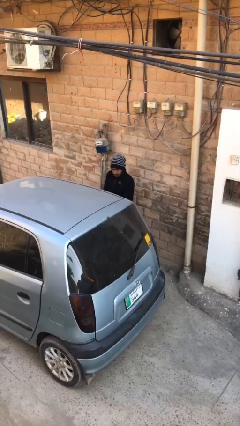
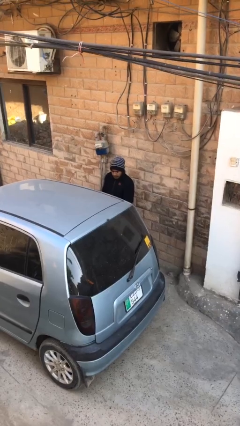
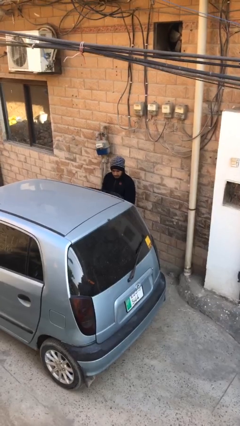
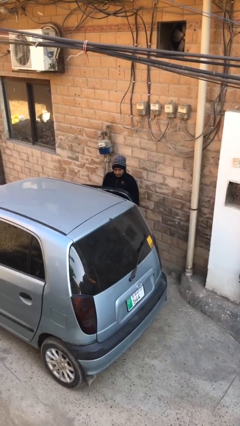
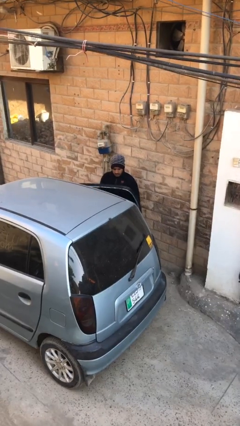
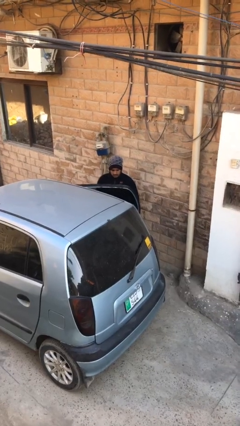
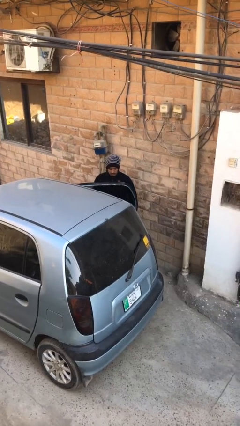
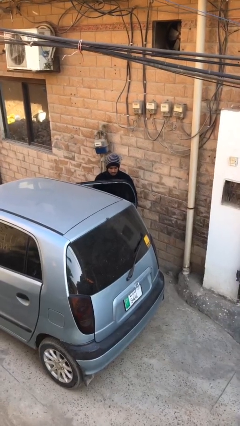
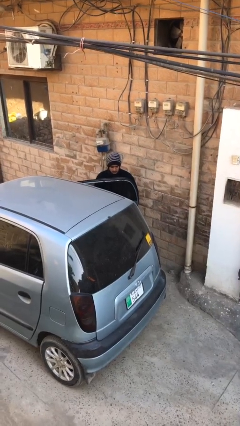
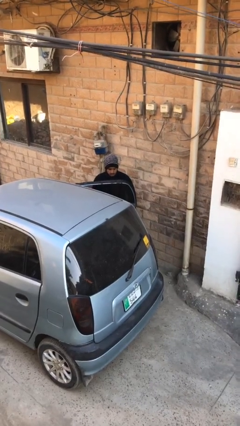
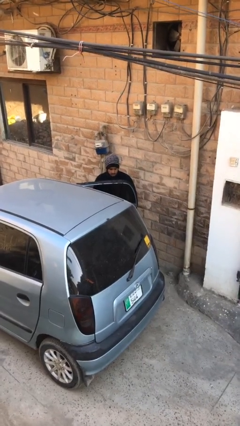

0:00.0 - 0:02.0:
person opens car door

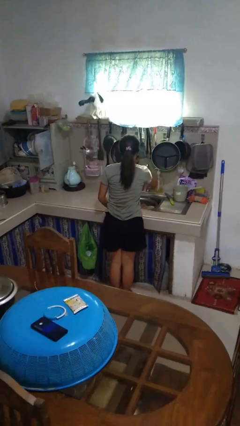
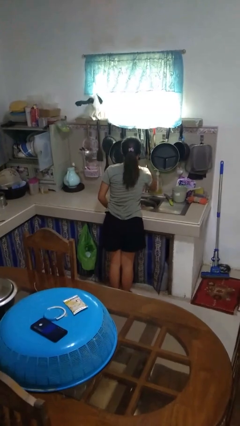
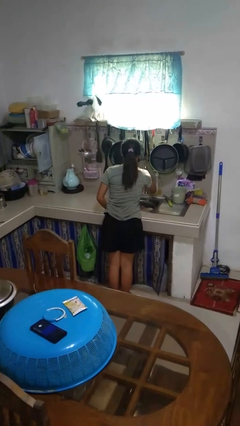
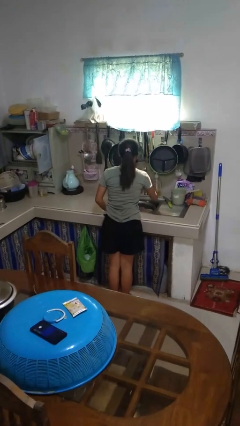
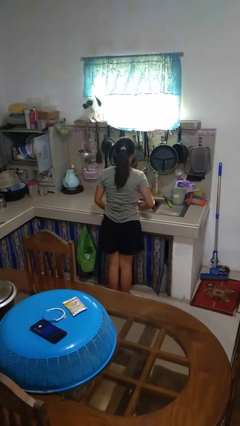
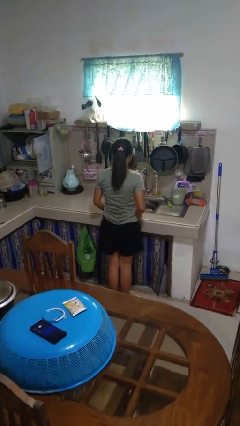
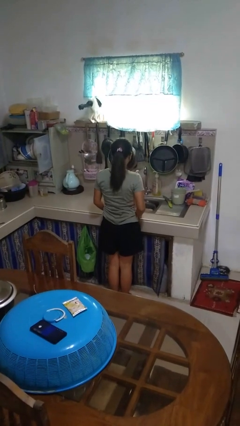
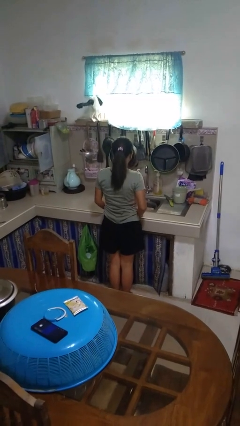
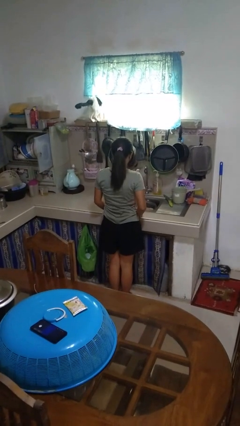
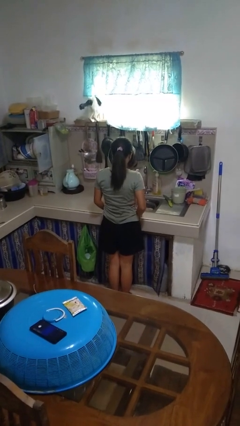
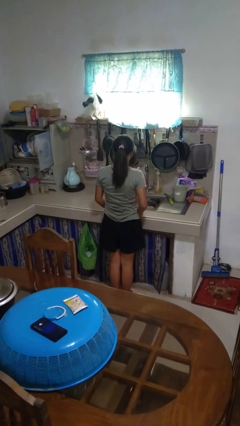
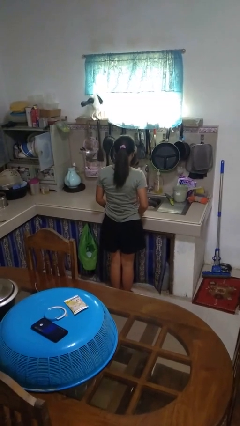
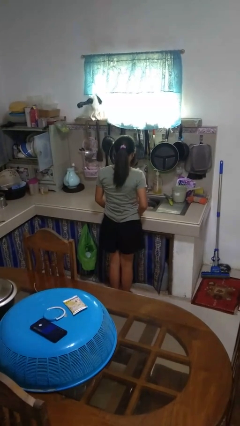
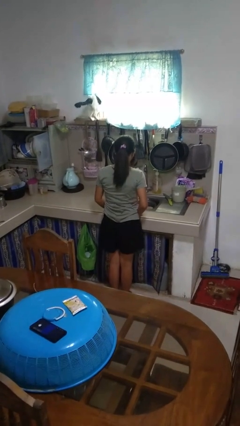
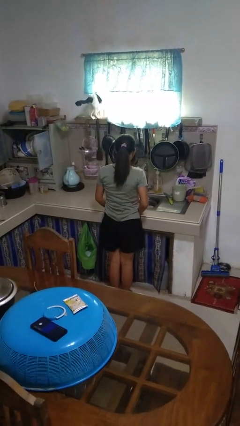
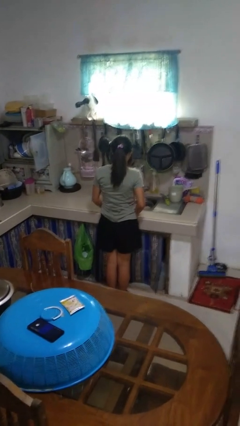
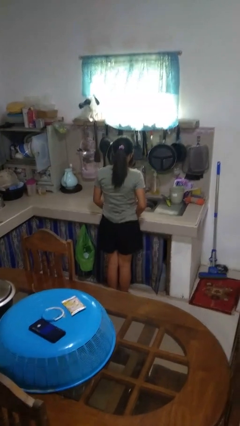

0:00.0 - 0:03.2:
person turns on faucet

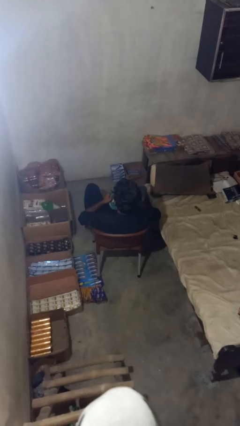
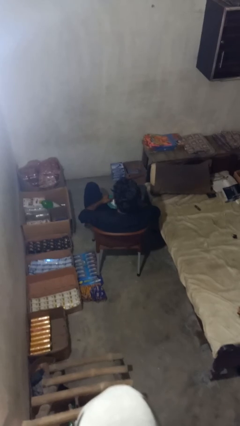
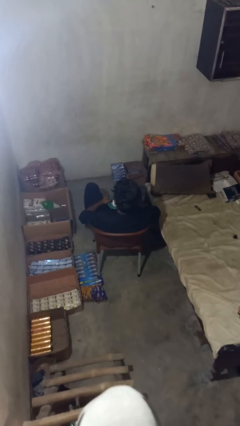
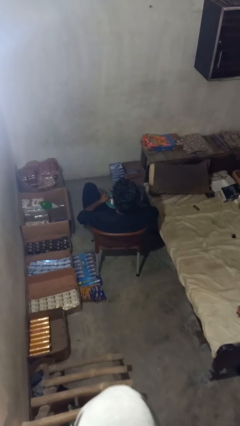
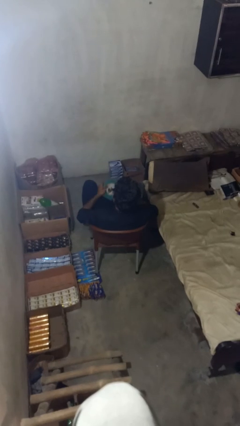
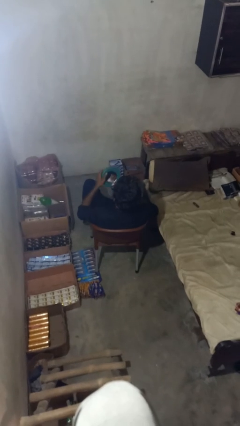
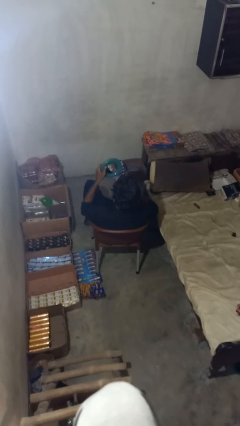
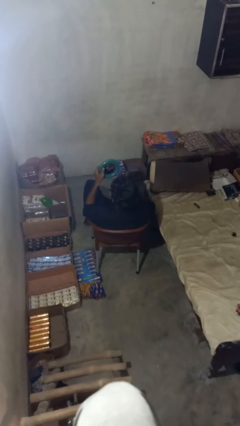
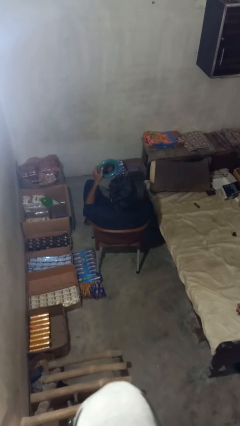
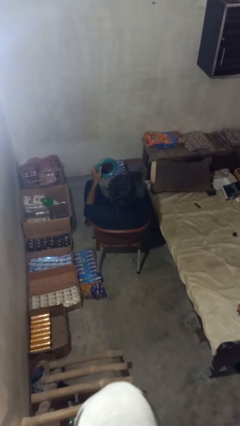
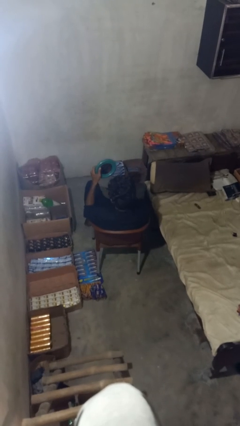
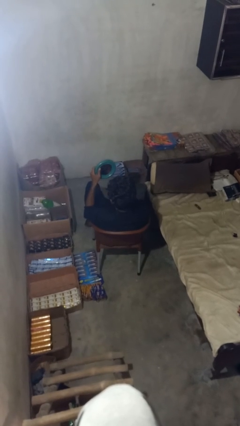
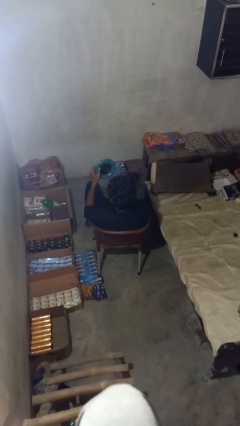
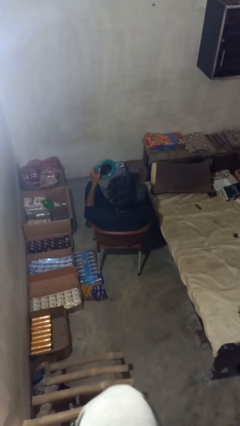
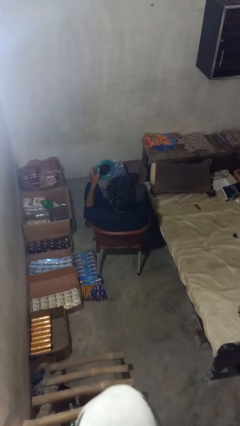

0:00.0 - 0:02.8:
person applies foundation makeup

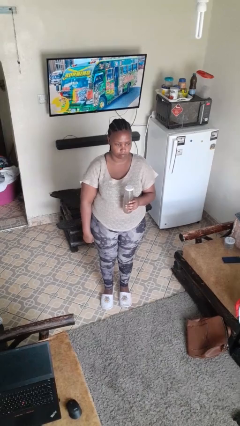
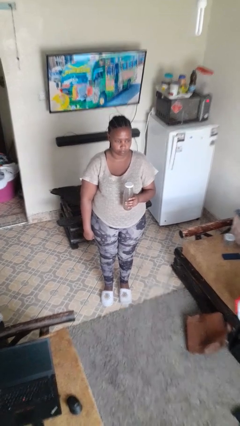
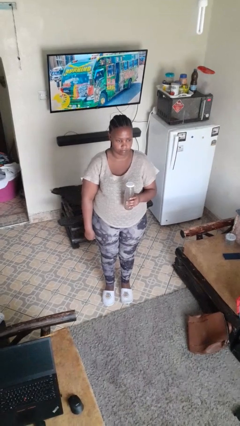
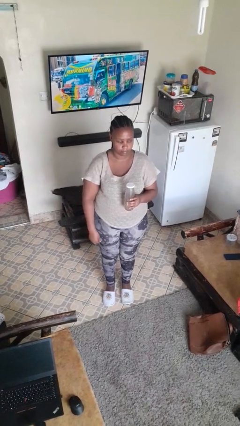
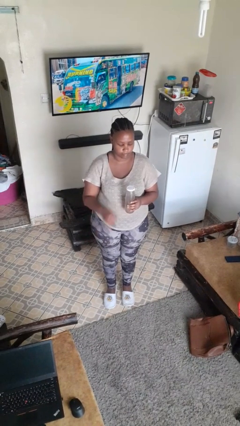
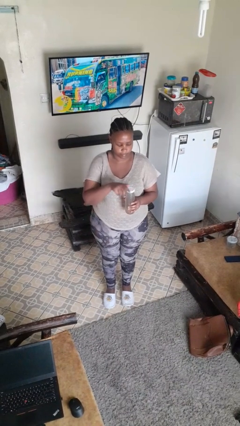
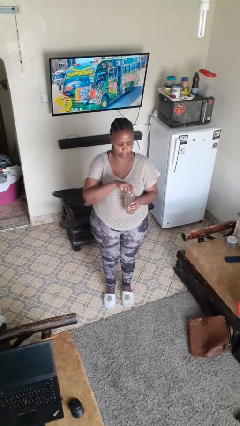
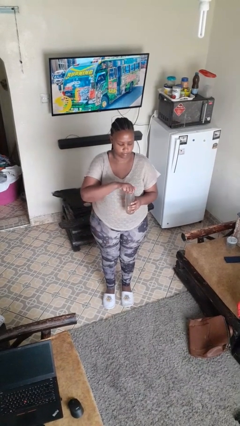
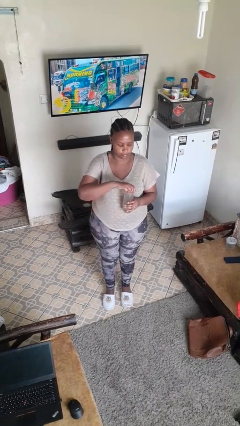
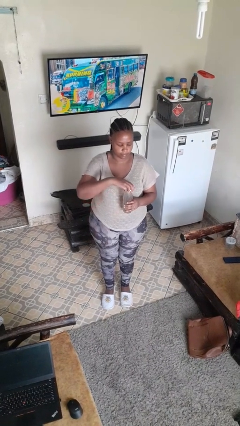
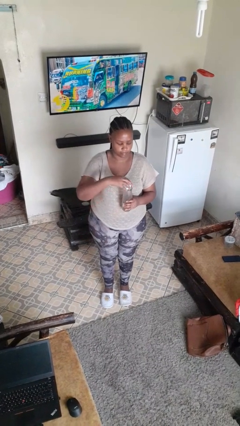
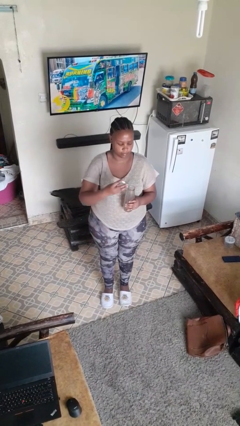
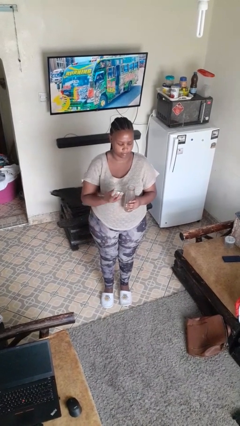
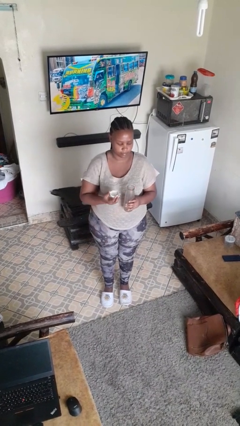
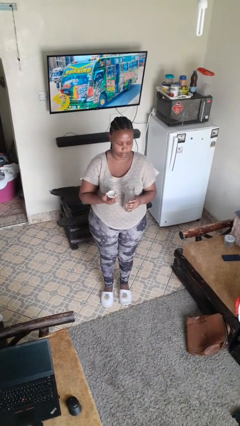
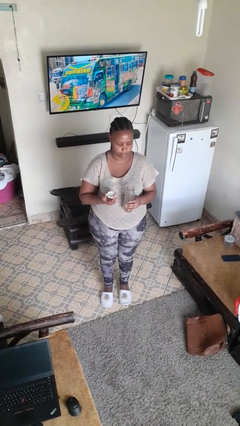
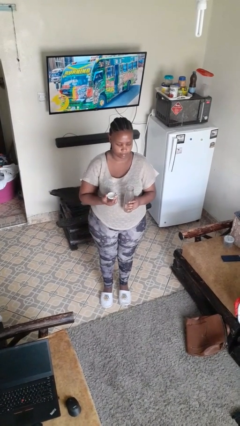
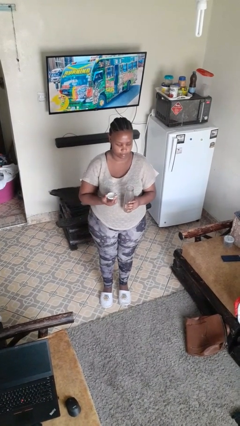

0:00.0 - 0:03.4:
person unscrews lid from bottle

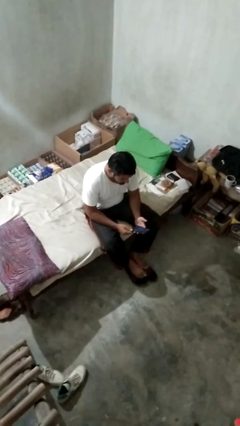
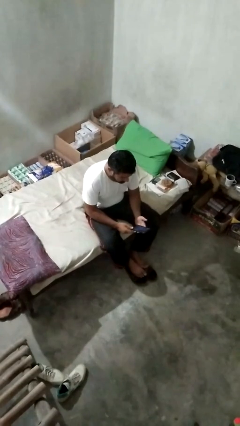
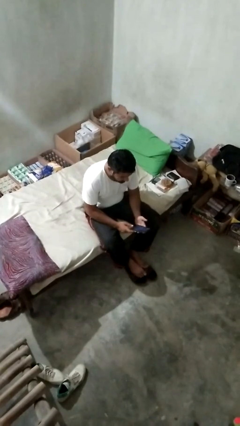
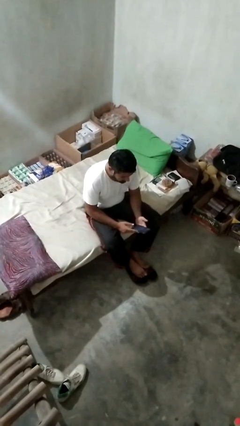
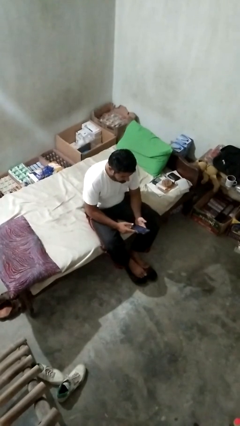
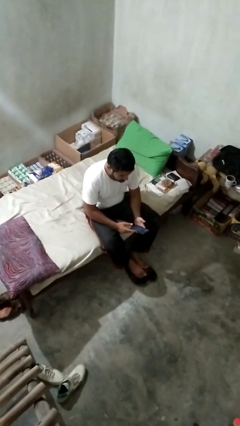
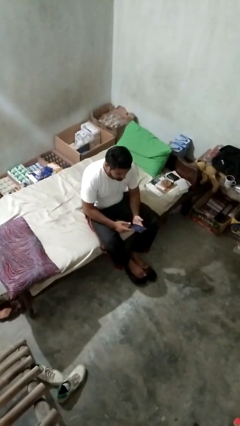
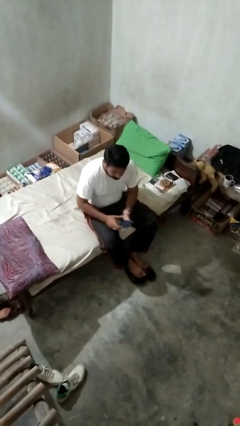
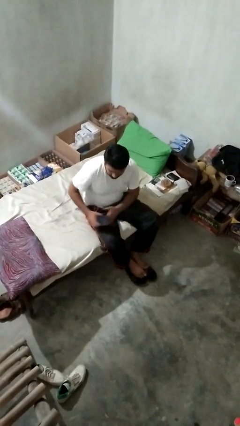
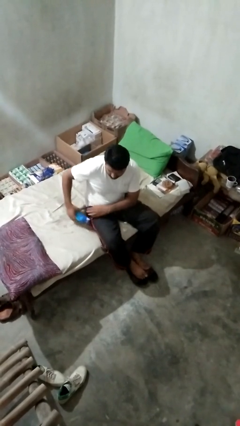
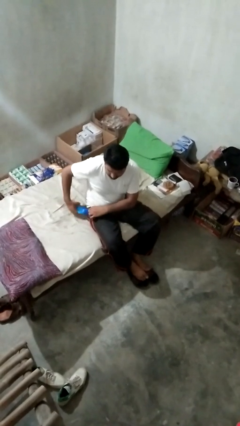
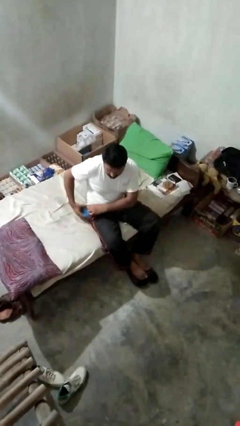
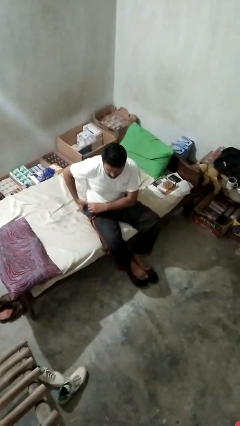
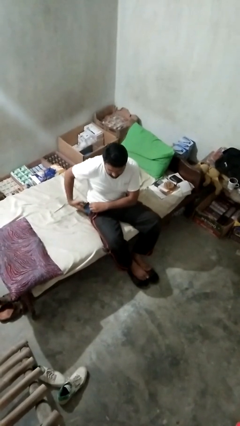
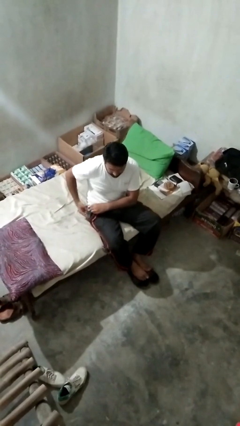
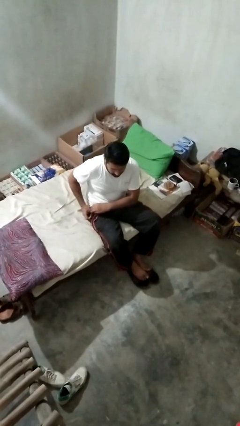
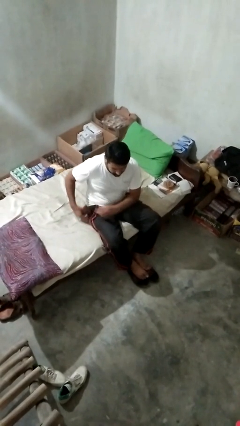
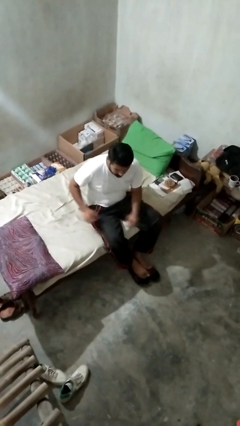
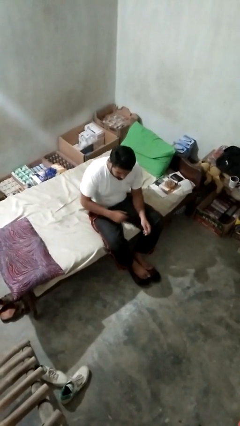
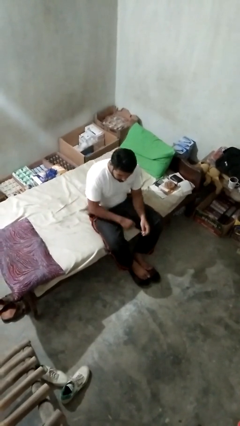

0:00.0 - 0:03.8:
person puts phone into pocket

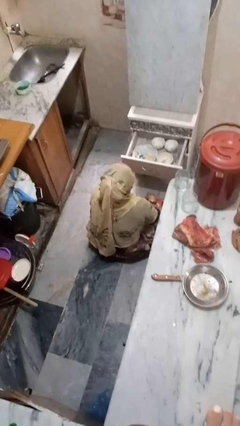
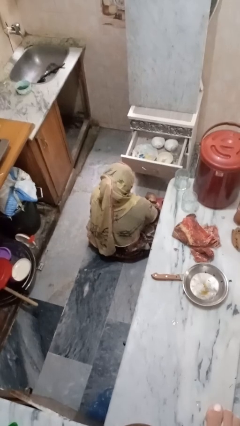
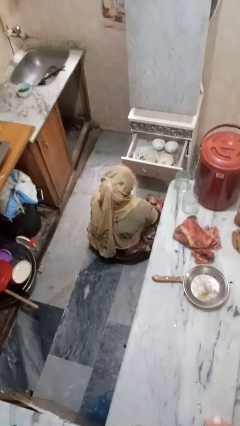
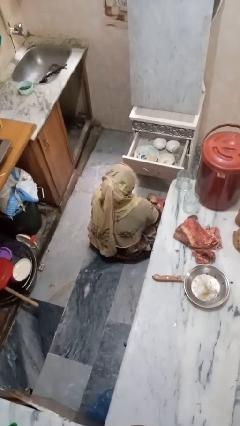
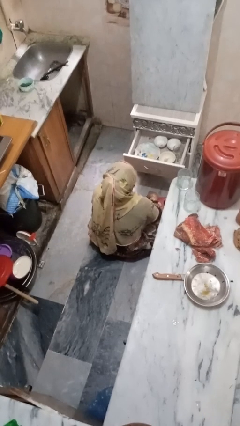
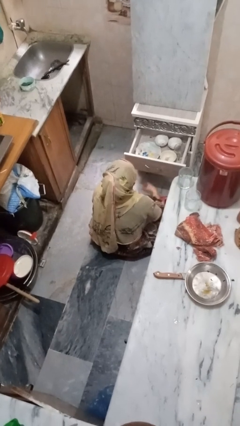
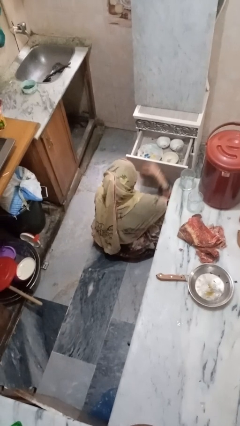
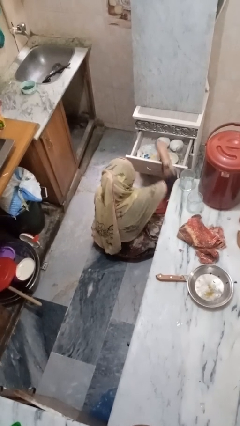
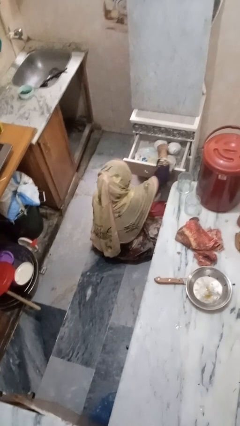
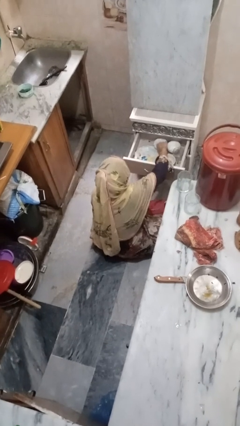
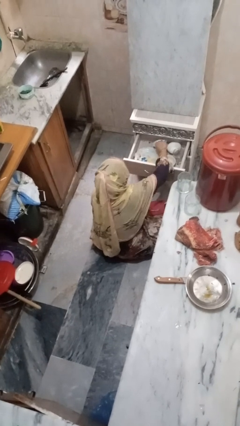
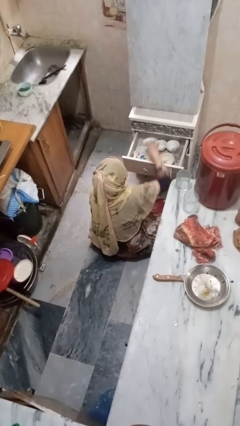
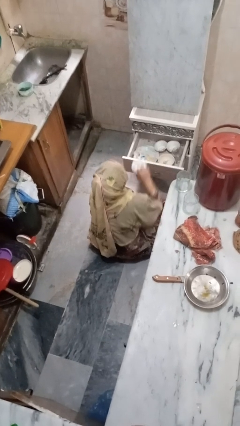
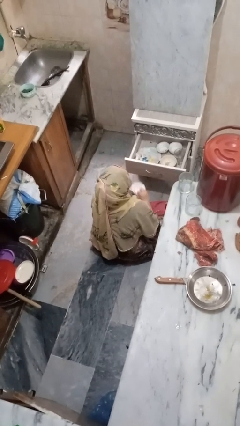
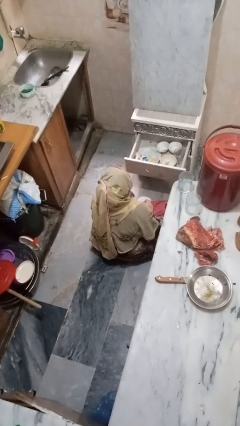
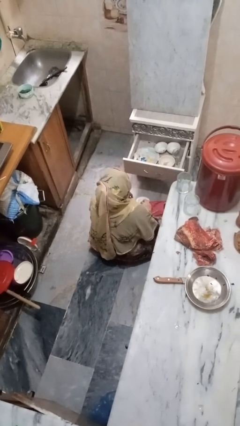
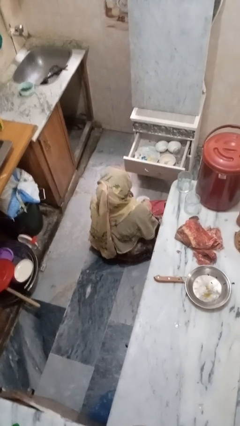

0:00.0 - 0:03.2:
person takes object from kitchen drawer
